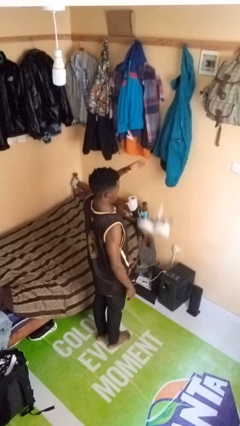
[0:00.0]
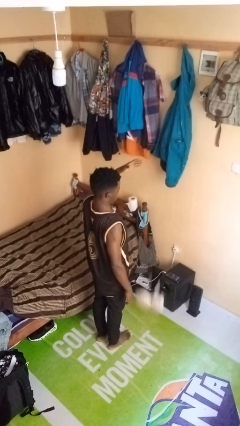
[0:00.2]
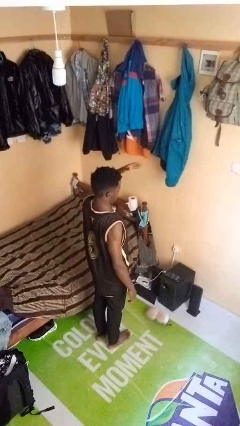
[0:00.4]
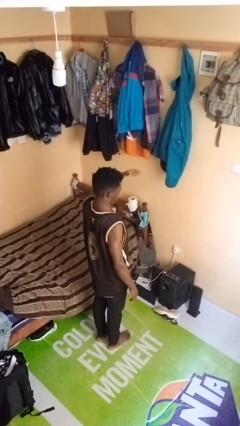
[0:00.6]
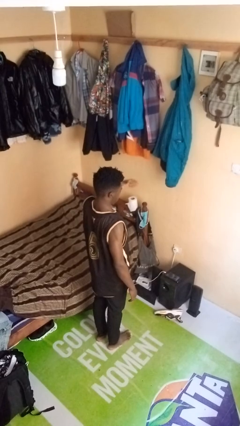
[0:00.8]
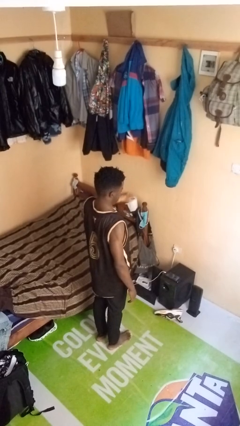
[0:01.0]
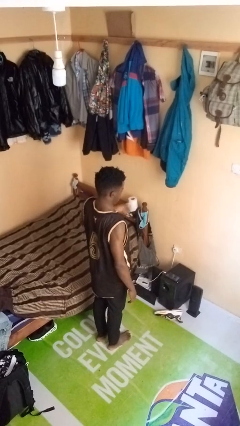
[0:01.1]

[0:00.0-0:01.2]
person drops object

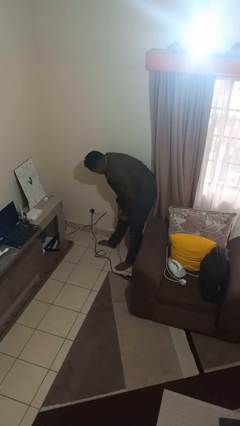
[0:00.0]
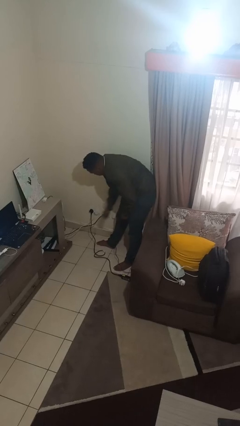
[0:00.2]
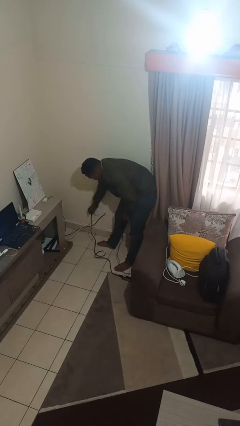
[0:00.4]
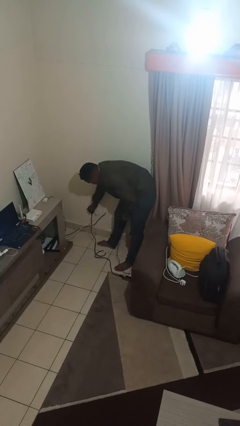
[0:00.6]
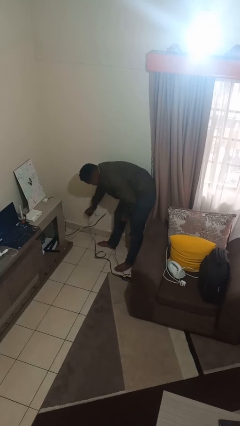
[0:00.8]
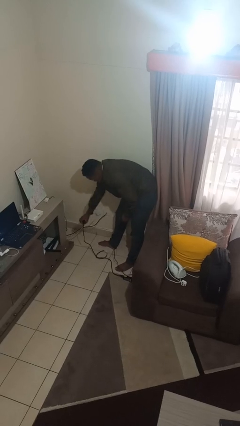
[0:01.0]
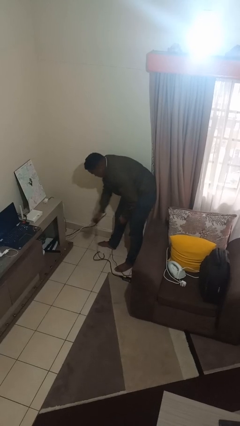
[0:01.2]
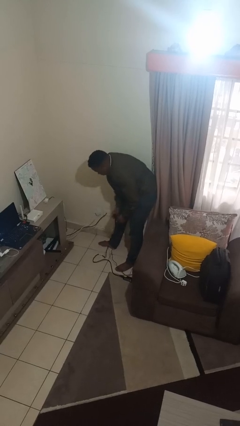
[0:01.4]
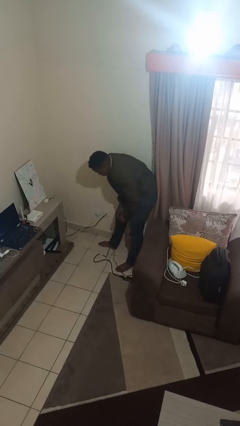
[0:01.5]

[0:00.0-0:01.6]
person unplugs from electrical socket

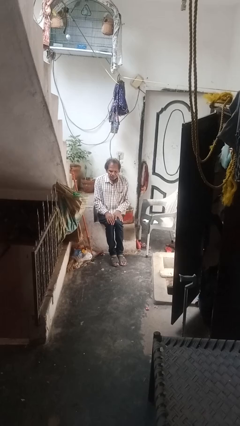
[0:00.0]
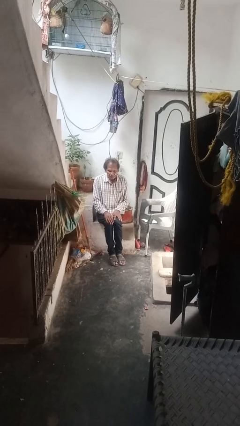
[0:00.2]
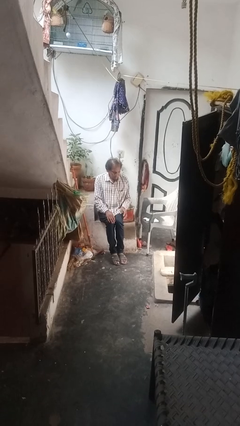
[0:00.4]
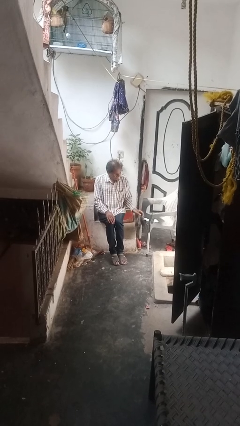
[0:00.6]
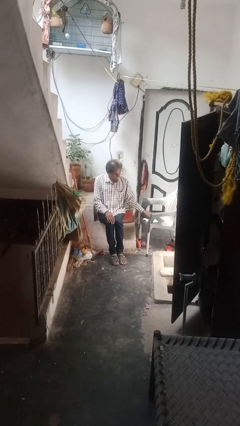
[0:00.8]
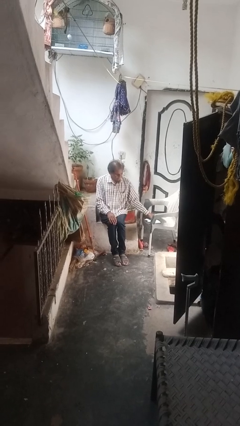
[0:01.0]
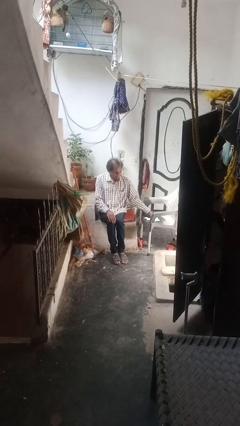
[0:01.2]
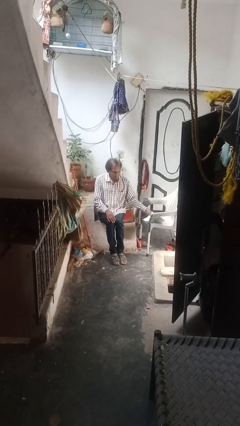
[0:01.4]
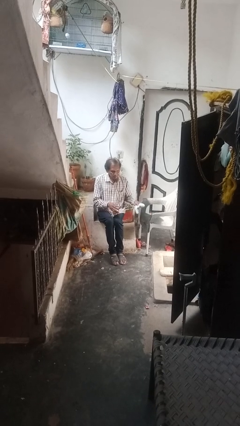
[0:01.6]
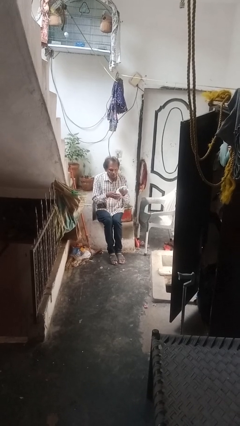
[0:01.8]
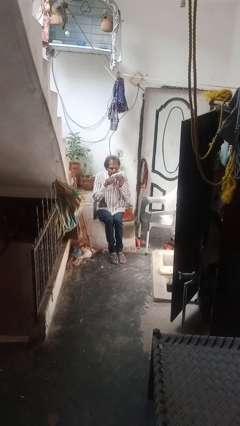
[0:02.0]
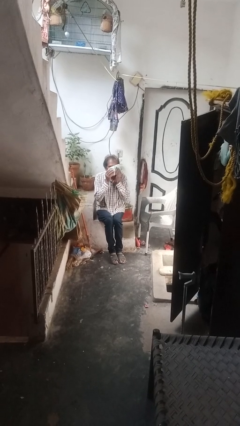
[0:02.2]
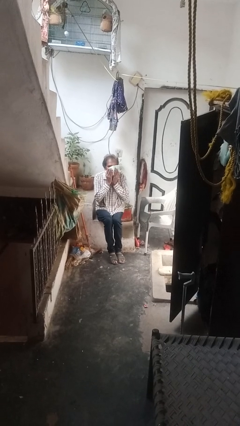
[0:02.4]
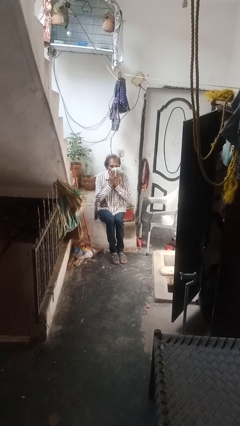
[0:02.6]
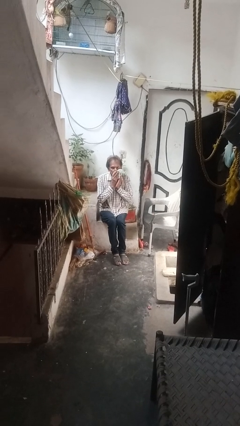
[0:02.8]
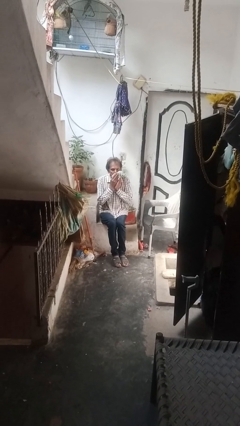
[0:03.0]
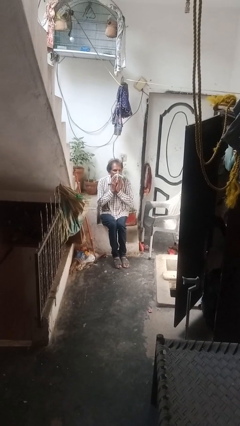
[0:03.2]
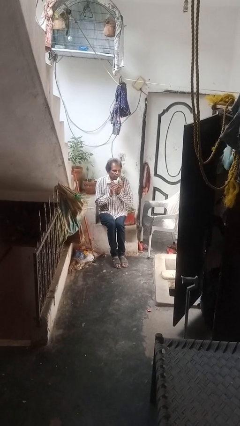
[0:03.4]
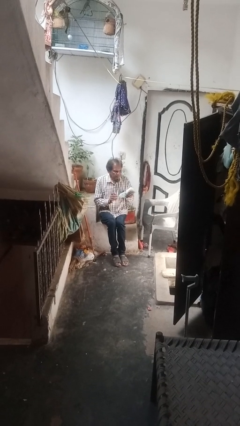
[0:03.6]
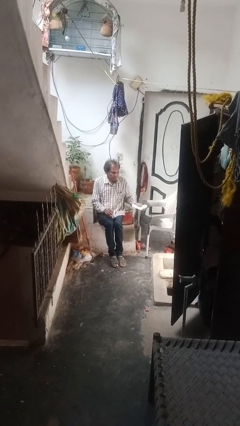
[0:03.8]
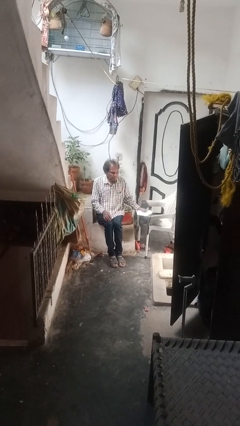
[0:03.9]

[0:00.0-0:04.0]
person wipes mouth with napkin

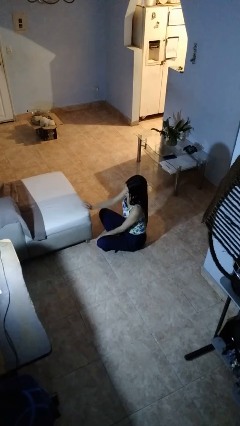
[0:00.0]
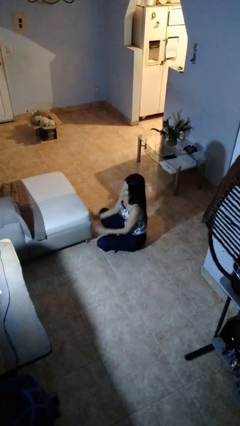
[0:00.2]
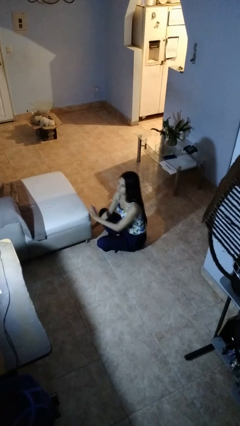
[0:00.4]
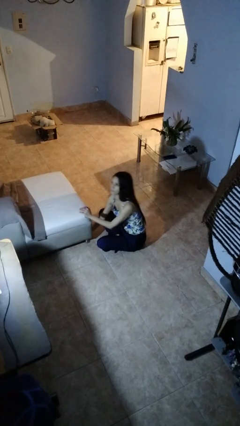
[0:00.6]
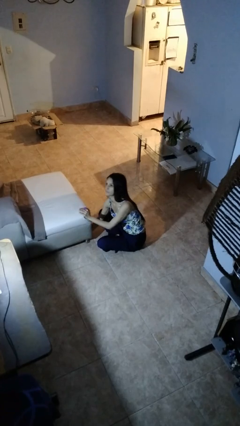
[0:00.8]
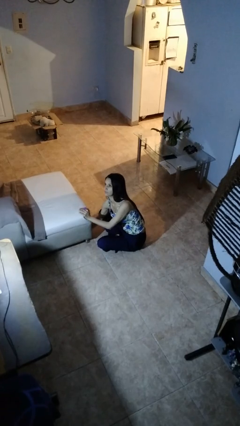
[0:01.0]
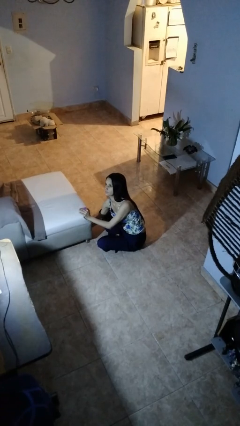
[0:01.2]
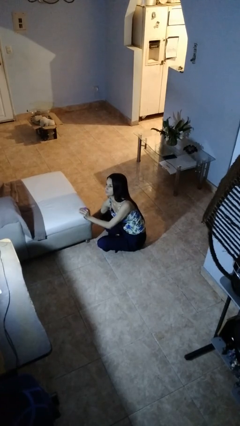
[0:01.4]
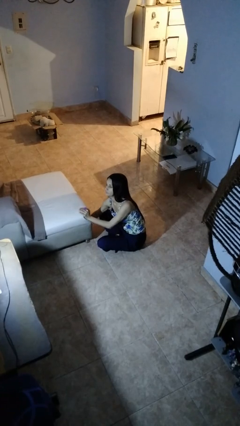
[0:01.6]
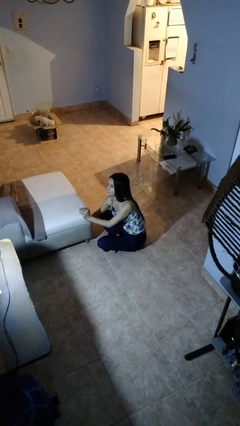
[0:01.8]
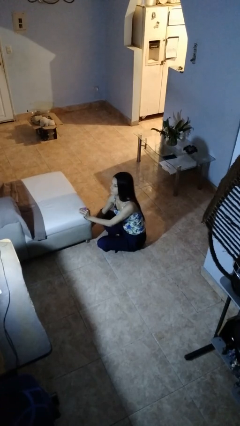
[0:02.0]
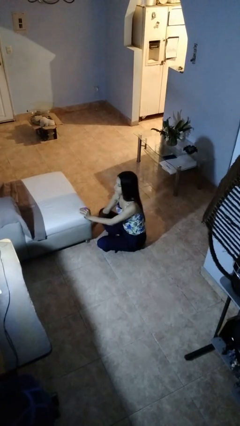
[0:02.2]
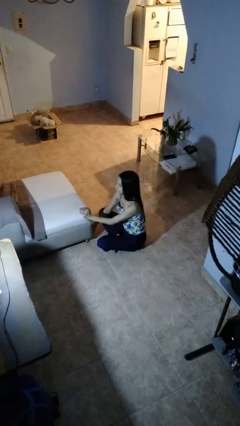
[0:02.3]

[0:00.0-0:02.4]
person searches under couch

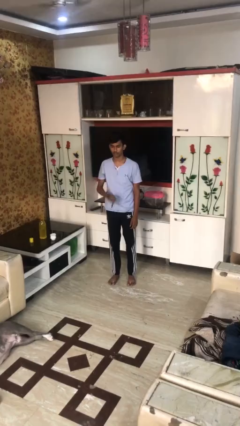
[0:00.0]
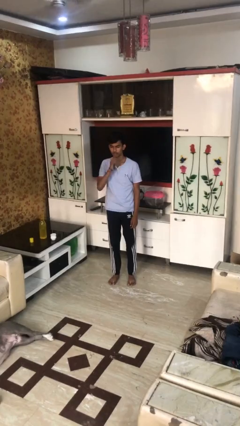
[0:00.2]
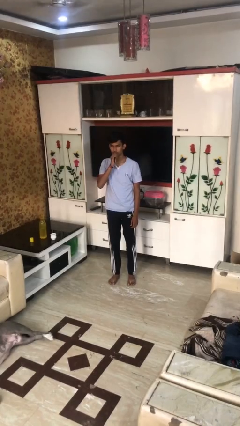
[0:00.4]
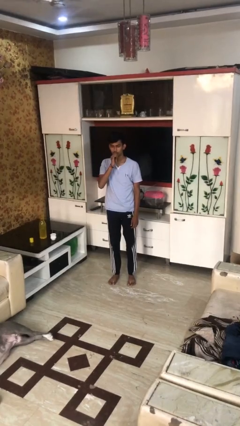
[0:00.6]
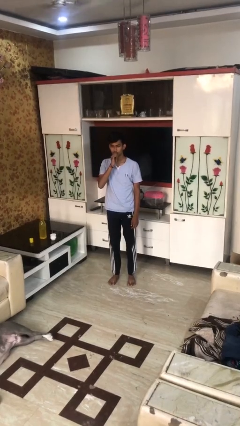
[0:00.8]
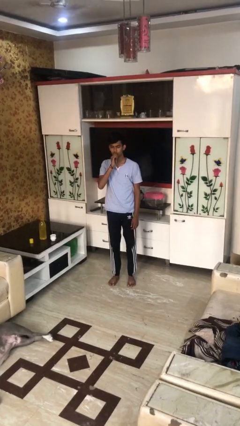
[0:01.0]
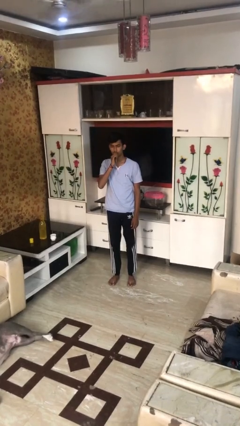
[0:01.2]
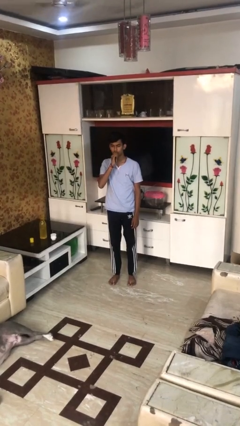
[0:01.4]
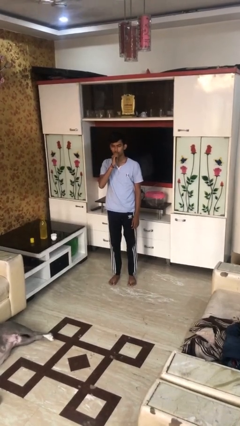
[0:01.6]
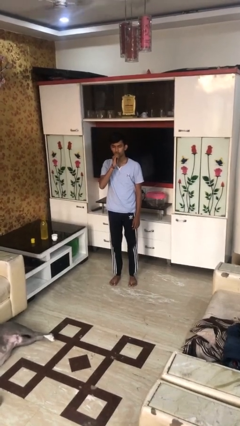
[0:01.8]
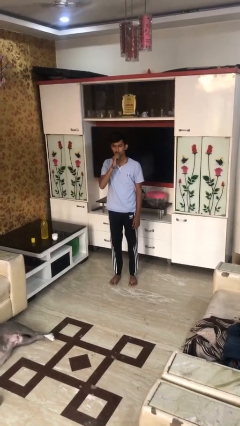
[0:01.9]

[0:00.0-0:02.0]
person vapes

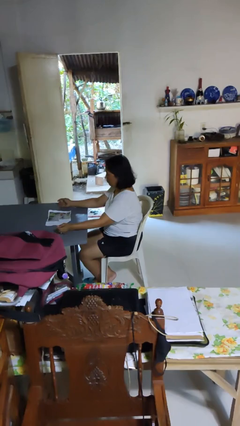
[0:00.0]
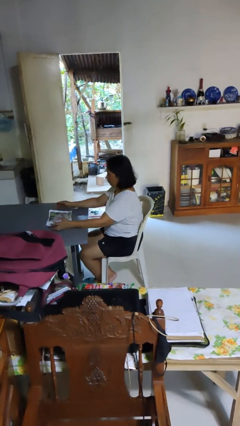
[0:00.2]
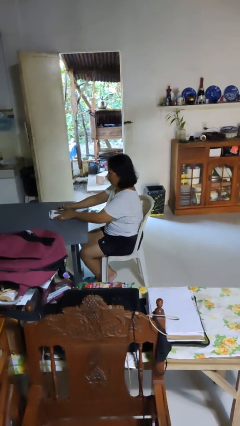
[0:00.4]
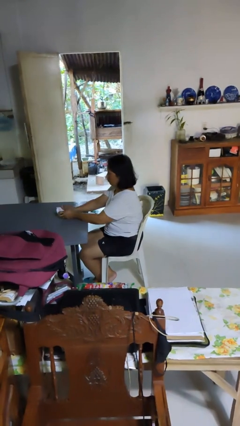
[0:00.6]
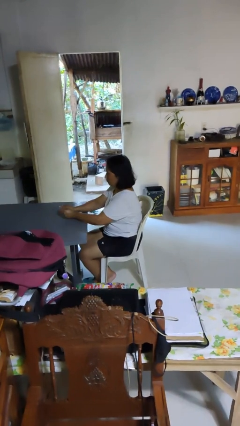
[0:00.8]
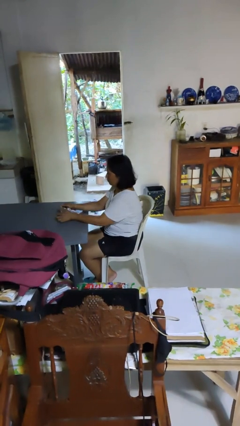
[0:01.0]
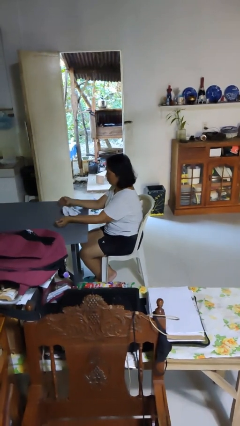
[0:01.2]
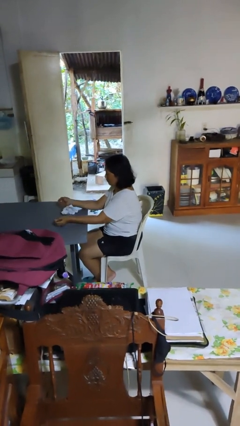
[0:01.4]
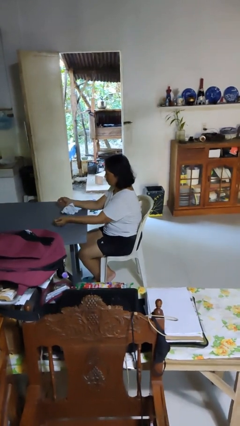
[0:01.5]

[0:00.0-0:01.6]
person crumples paper

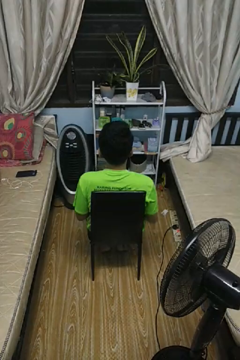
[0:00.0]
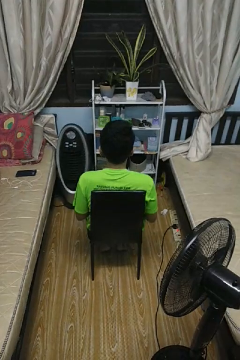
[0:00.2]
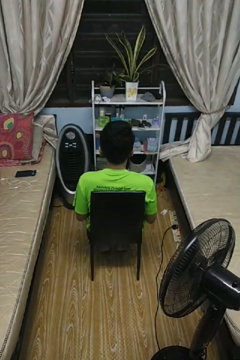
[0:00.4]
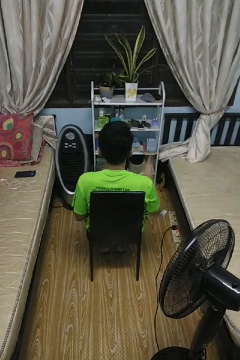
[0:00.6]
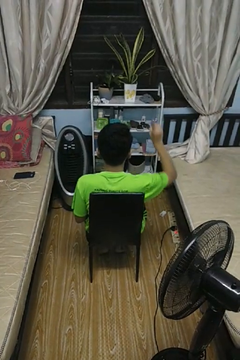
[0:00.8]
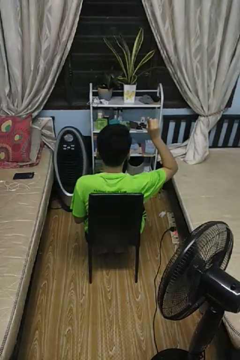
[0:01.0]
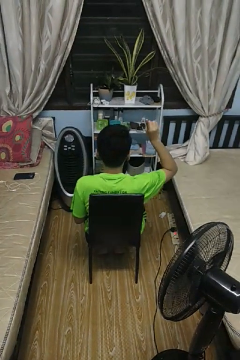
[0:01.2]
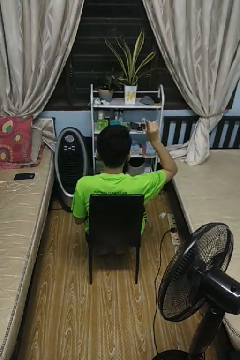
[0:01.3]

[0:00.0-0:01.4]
person gestures number one

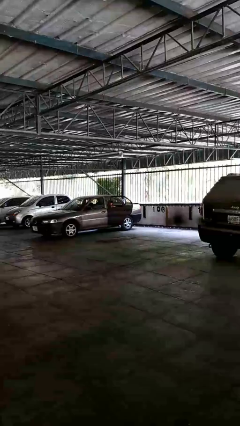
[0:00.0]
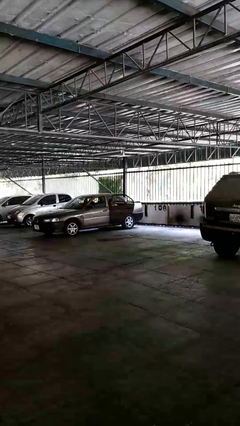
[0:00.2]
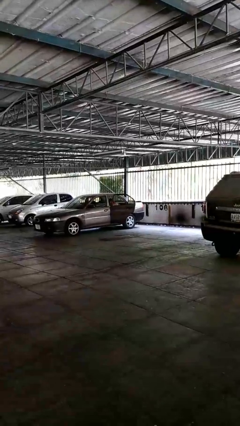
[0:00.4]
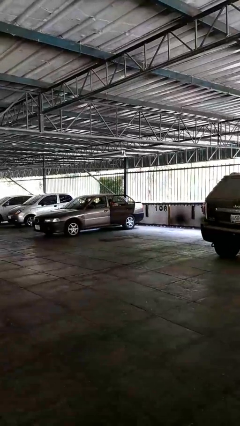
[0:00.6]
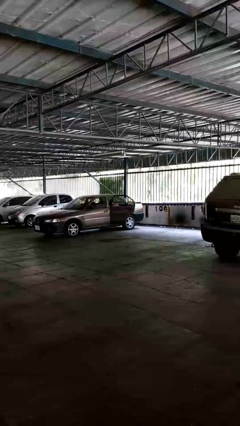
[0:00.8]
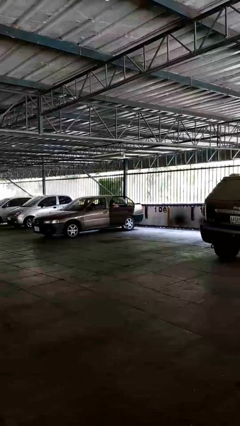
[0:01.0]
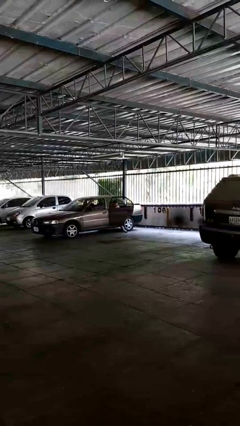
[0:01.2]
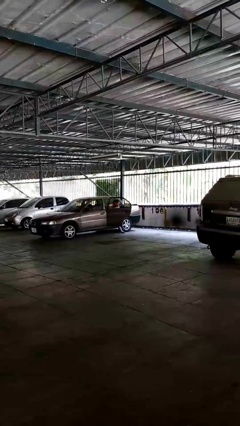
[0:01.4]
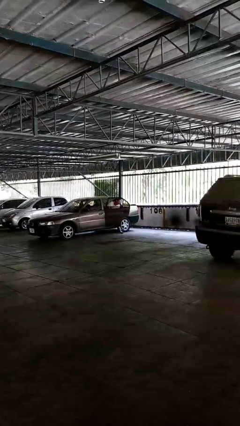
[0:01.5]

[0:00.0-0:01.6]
person enters car

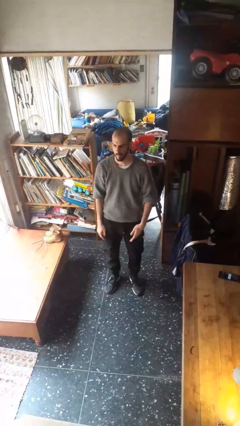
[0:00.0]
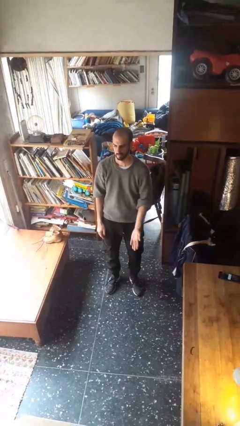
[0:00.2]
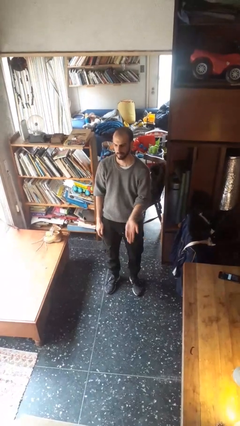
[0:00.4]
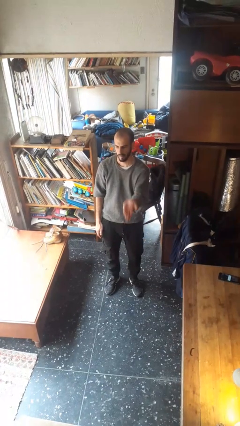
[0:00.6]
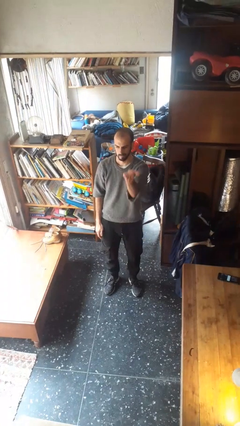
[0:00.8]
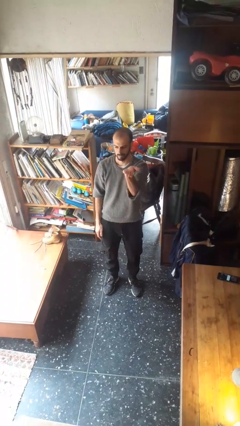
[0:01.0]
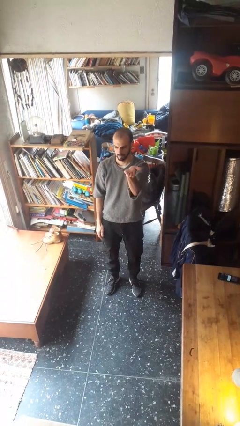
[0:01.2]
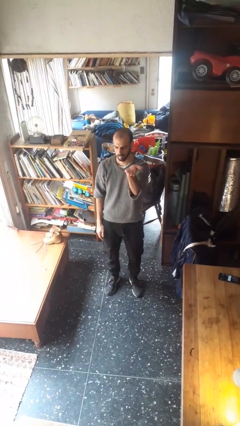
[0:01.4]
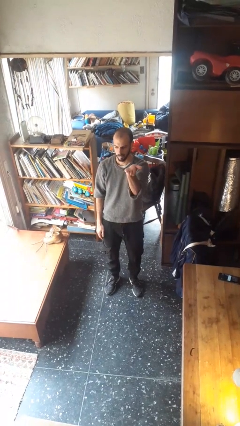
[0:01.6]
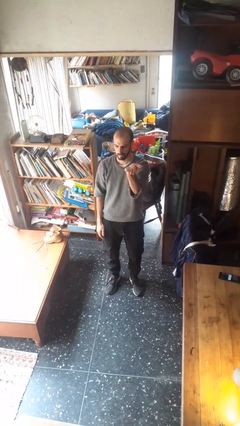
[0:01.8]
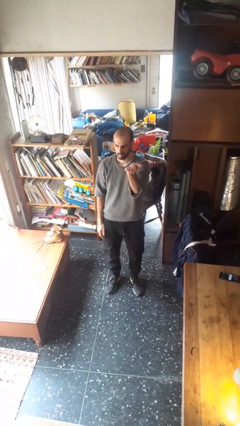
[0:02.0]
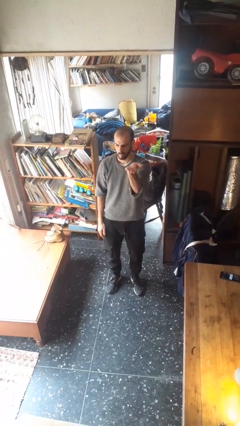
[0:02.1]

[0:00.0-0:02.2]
person gestures swipe up
